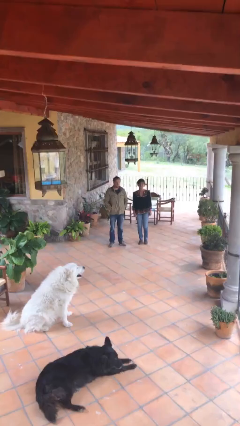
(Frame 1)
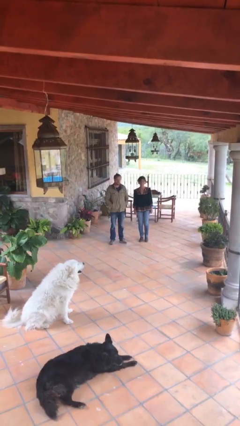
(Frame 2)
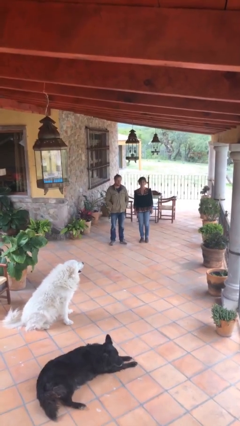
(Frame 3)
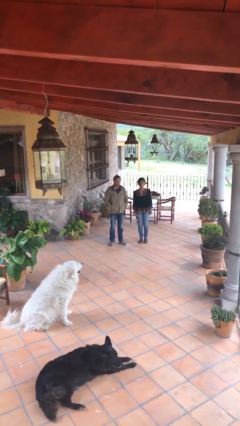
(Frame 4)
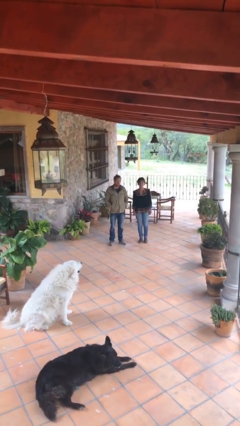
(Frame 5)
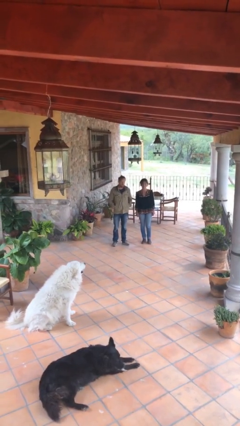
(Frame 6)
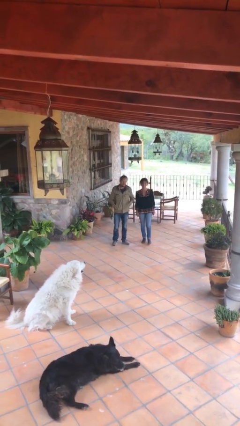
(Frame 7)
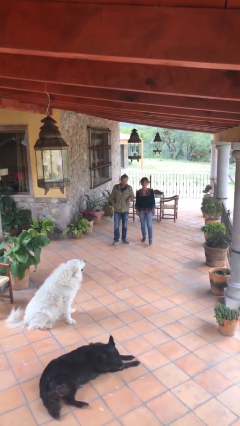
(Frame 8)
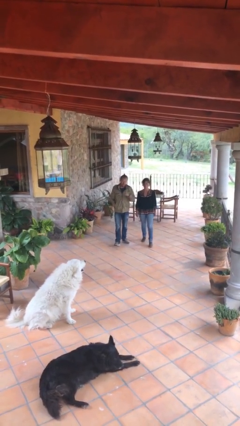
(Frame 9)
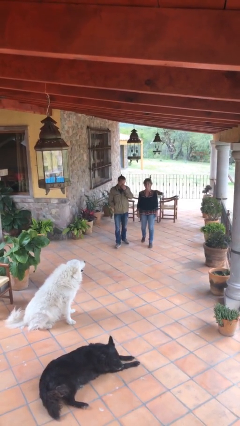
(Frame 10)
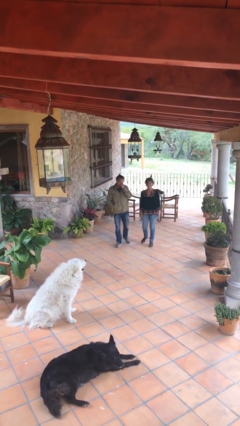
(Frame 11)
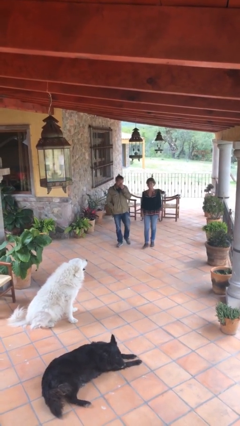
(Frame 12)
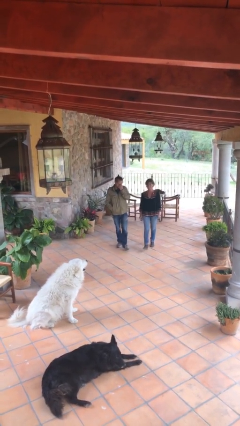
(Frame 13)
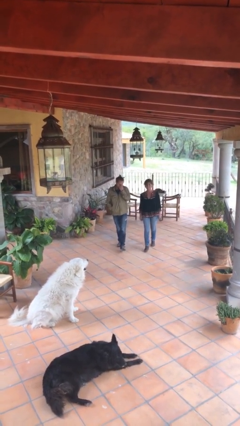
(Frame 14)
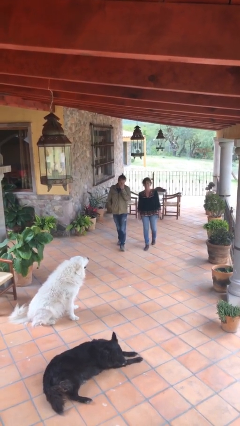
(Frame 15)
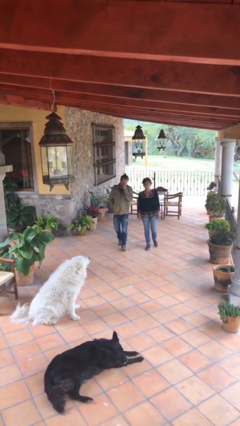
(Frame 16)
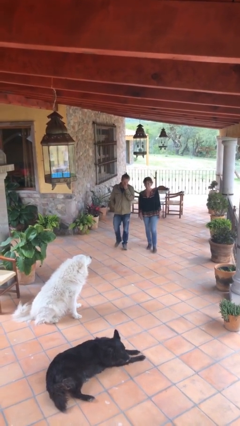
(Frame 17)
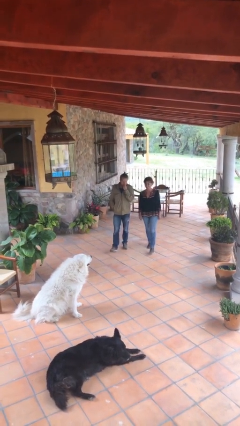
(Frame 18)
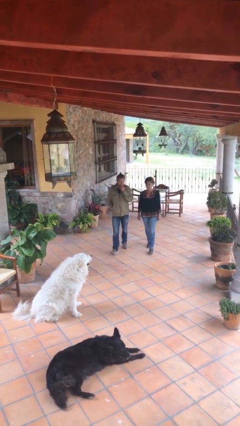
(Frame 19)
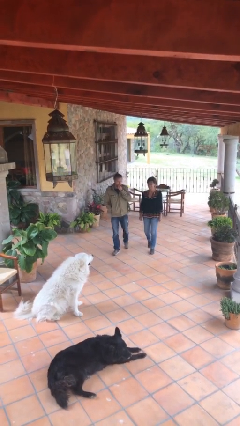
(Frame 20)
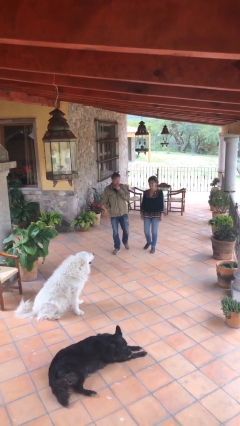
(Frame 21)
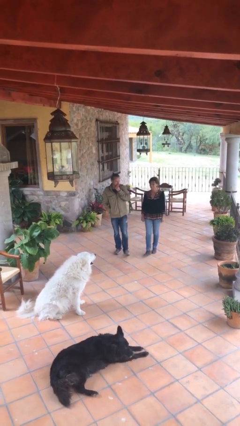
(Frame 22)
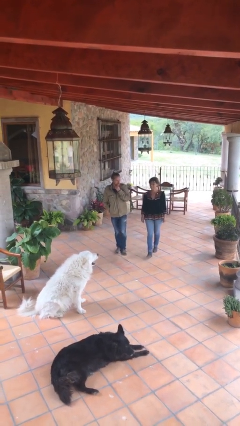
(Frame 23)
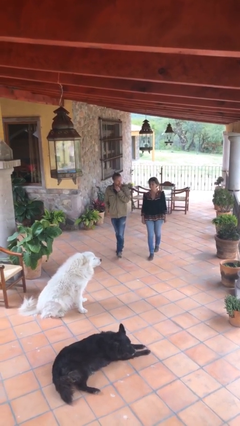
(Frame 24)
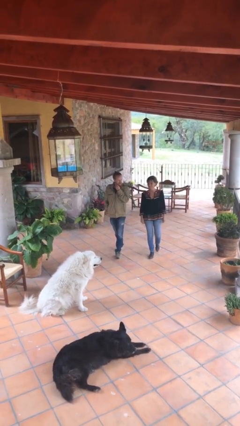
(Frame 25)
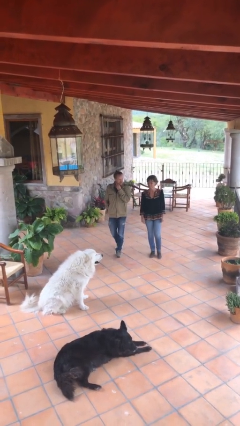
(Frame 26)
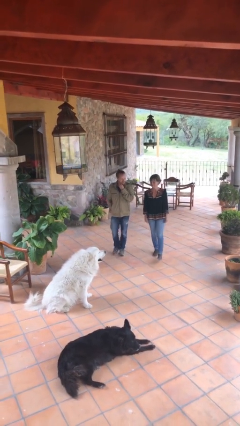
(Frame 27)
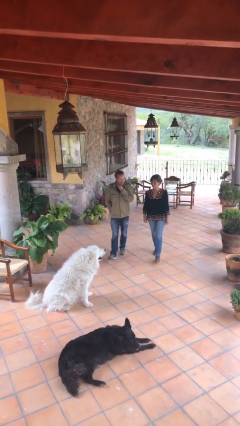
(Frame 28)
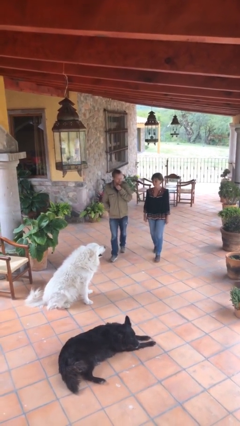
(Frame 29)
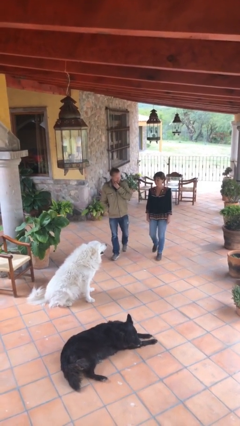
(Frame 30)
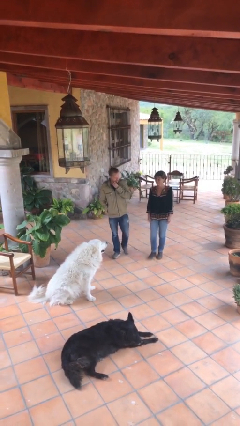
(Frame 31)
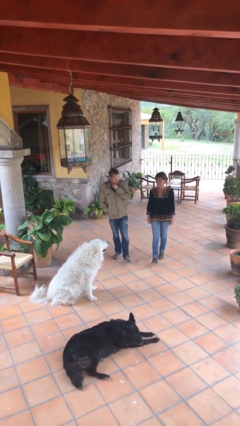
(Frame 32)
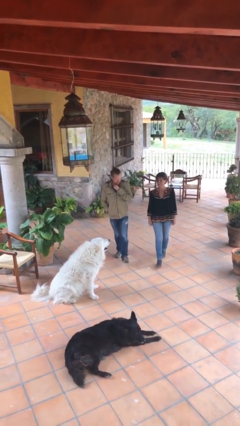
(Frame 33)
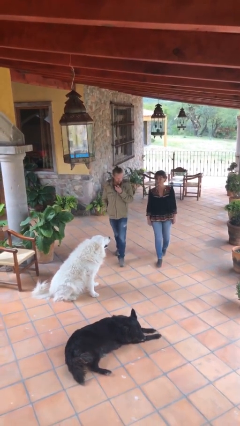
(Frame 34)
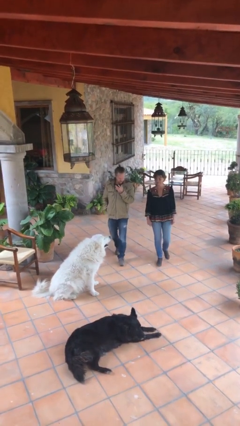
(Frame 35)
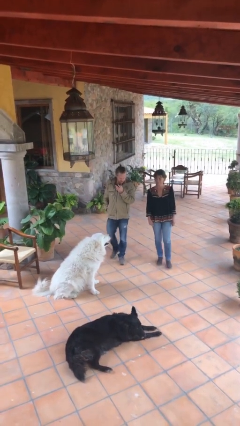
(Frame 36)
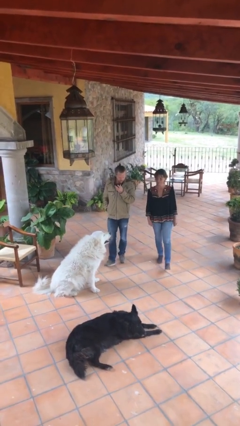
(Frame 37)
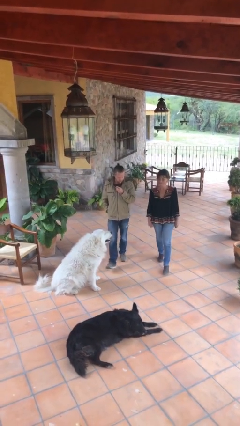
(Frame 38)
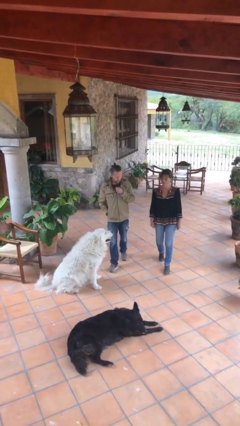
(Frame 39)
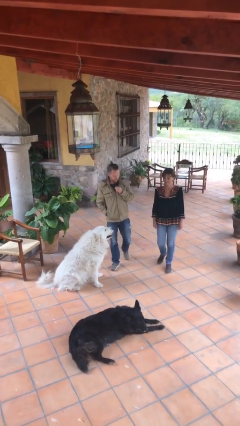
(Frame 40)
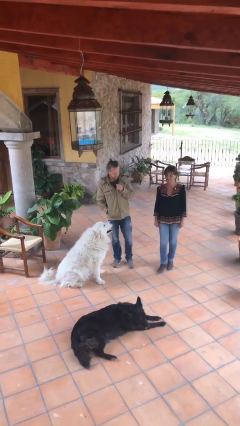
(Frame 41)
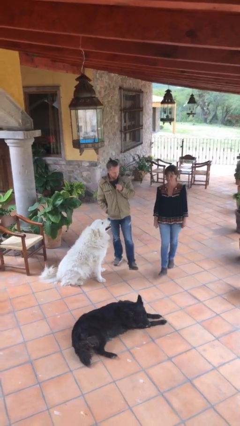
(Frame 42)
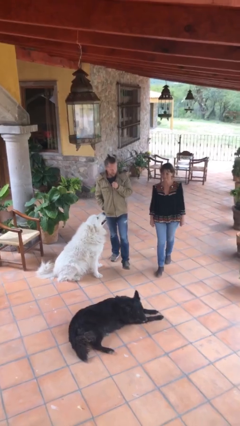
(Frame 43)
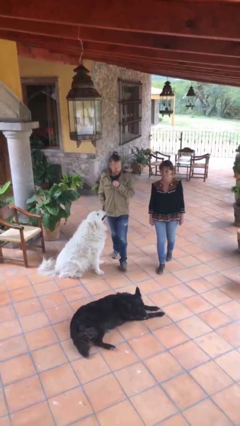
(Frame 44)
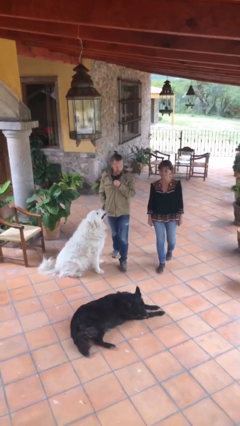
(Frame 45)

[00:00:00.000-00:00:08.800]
person talks to person

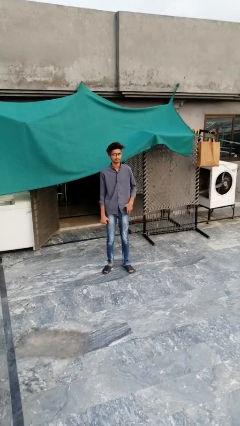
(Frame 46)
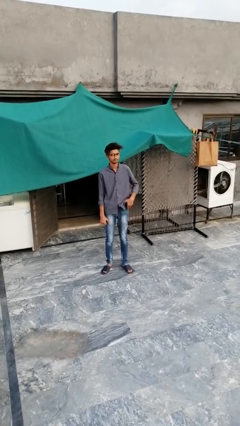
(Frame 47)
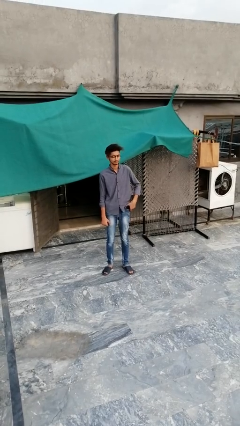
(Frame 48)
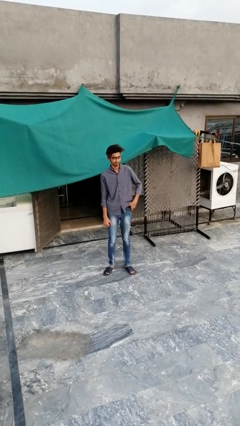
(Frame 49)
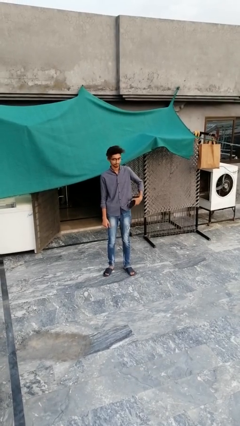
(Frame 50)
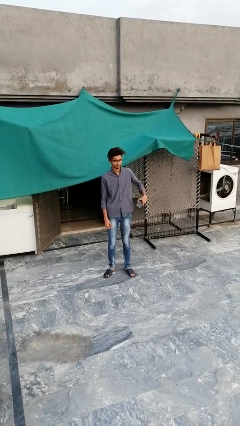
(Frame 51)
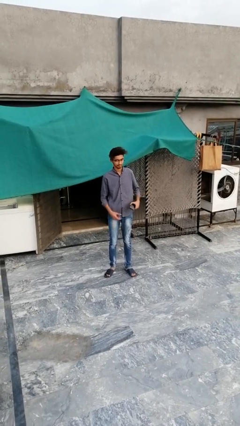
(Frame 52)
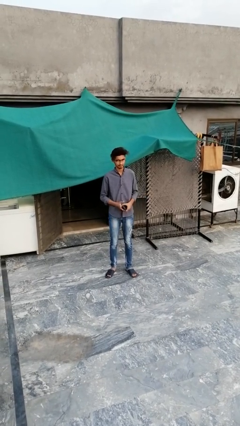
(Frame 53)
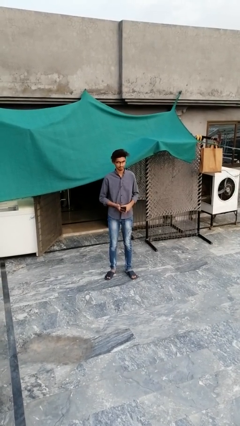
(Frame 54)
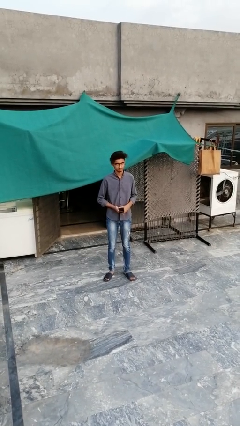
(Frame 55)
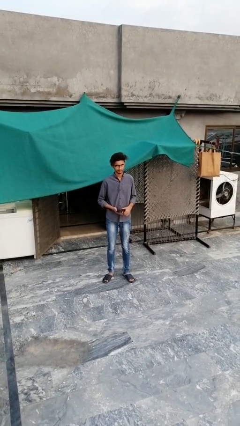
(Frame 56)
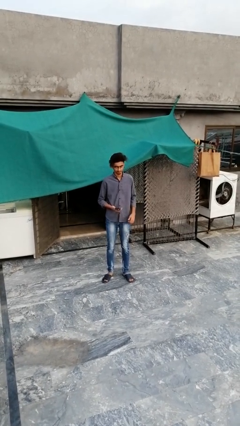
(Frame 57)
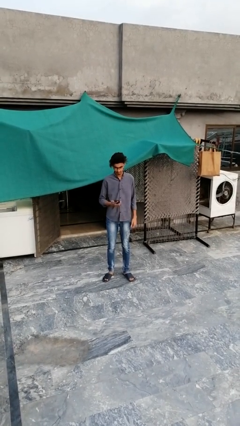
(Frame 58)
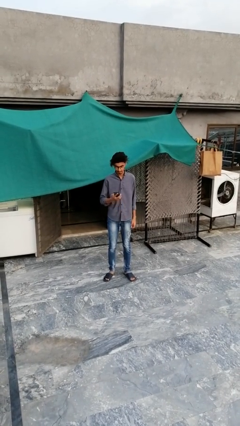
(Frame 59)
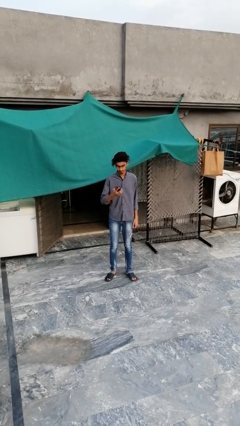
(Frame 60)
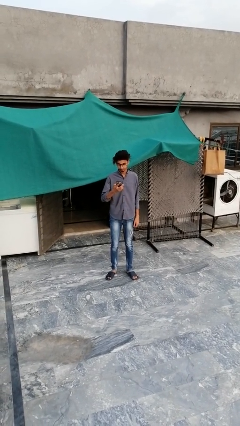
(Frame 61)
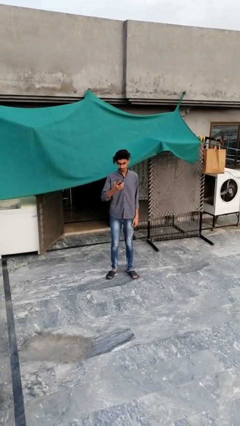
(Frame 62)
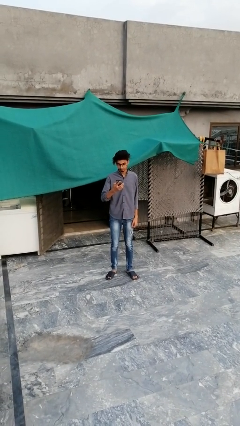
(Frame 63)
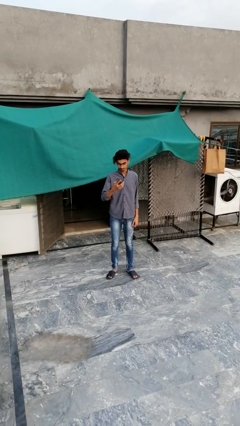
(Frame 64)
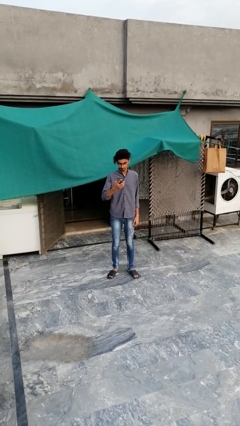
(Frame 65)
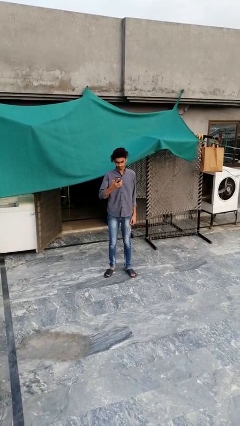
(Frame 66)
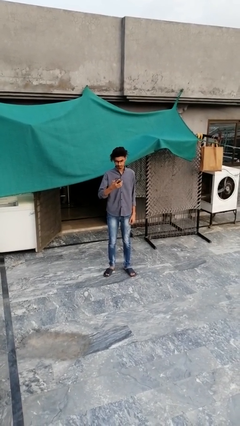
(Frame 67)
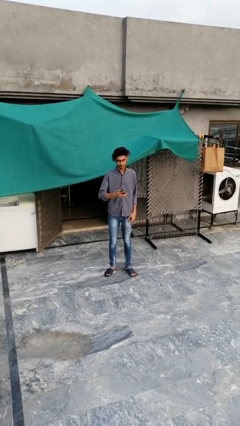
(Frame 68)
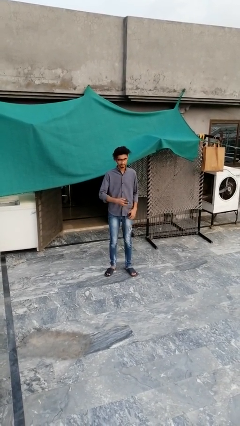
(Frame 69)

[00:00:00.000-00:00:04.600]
person takes phone from pocket

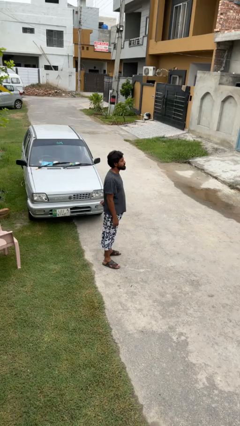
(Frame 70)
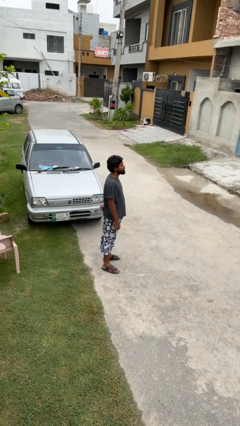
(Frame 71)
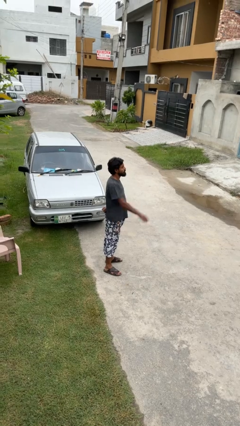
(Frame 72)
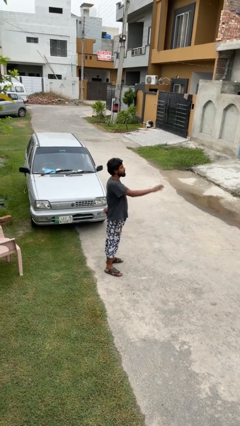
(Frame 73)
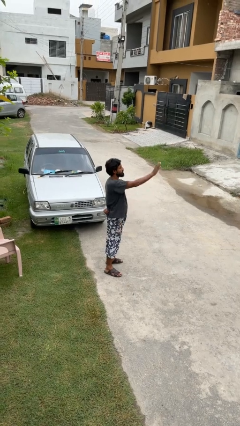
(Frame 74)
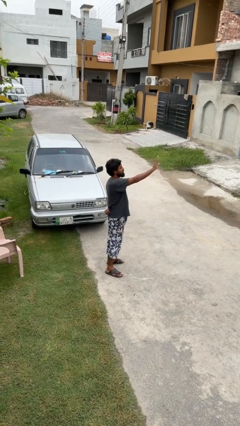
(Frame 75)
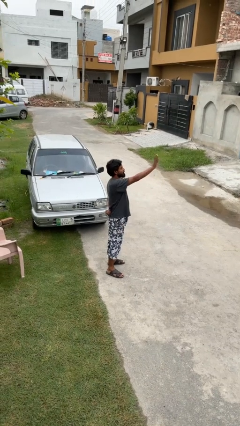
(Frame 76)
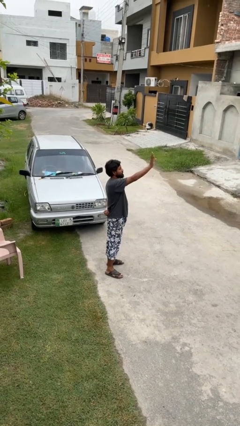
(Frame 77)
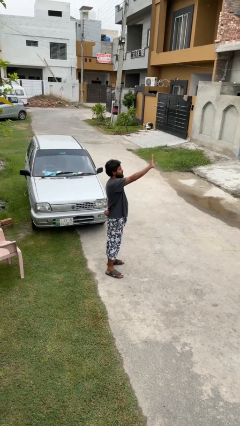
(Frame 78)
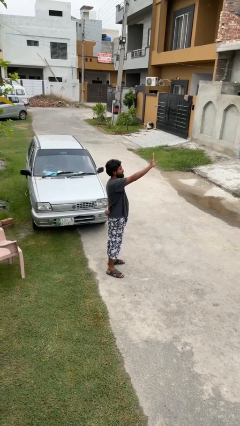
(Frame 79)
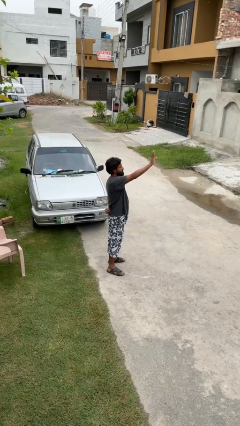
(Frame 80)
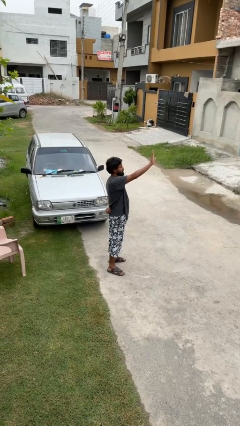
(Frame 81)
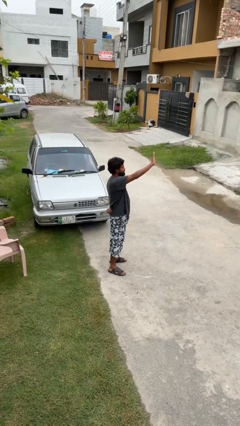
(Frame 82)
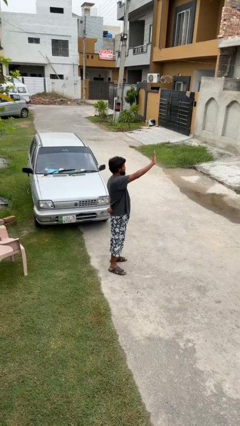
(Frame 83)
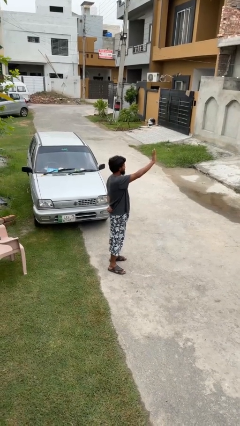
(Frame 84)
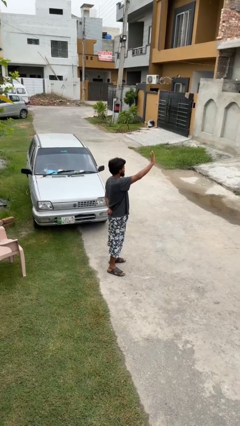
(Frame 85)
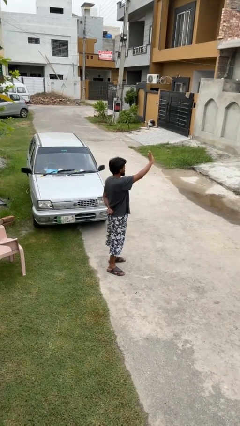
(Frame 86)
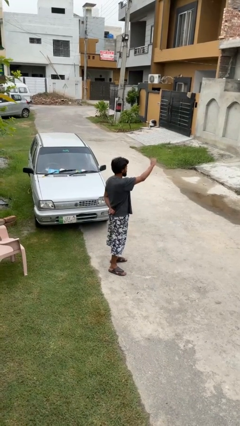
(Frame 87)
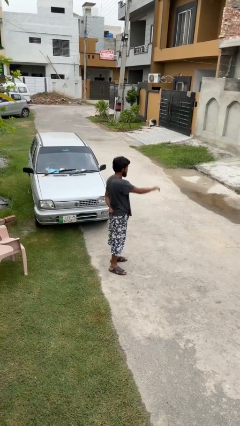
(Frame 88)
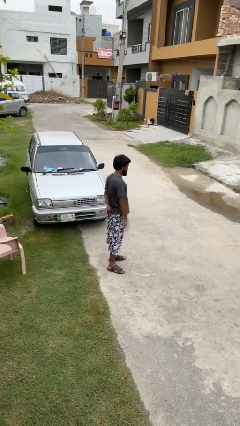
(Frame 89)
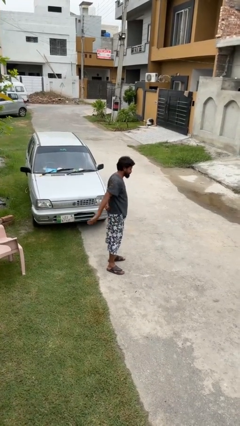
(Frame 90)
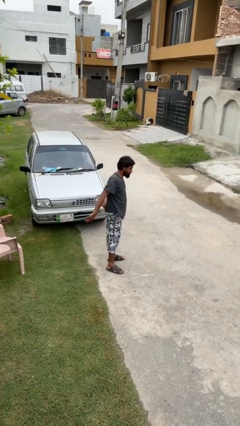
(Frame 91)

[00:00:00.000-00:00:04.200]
person waves at person
